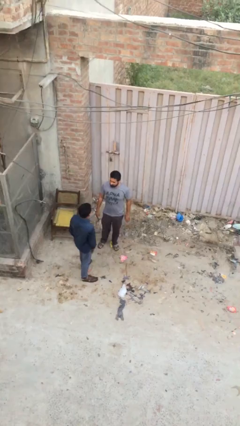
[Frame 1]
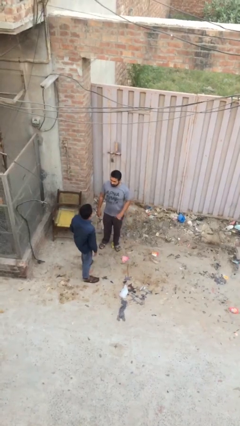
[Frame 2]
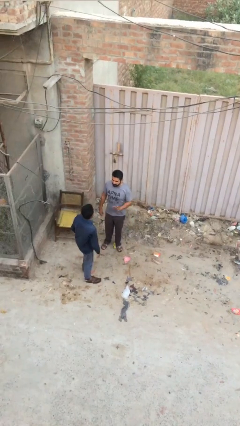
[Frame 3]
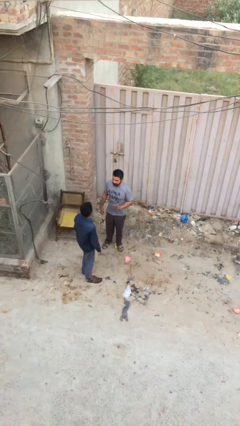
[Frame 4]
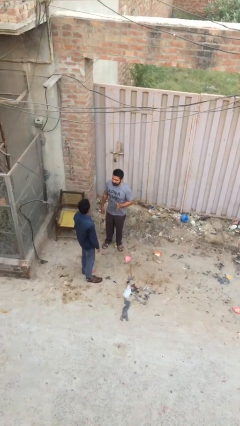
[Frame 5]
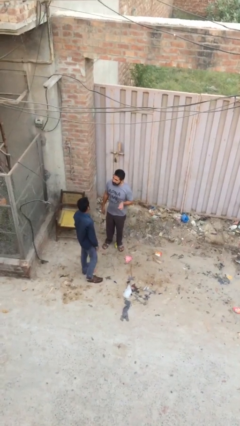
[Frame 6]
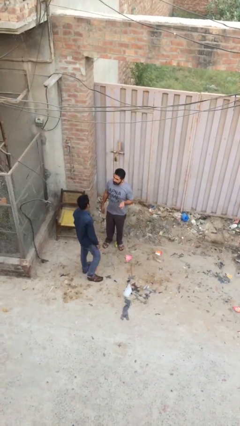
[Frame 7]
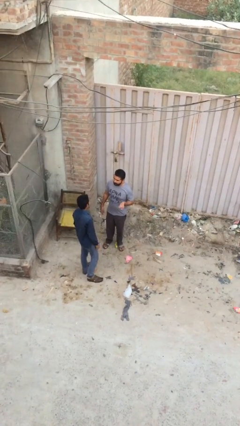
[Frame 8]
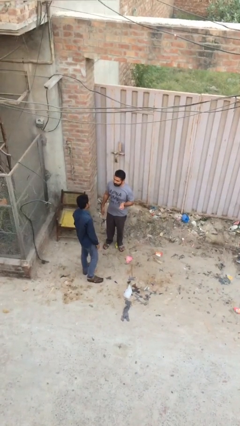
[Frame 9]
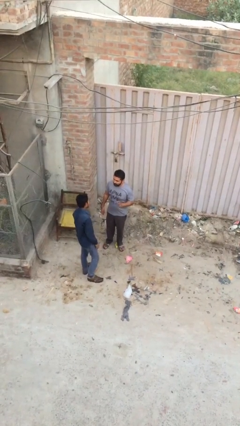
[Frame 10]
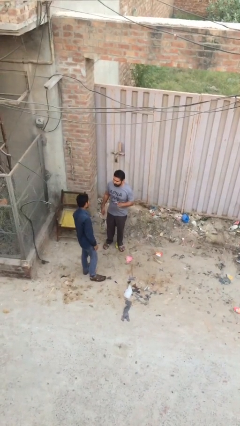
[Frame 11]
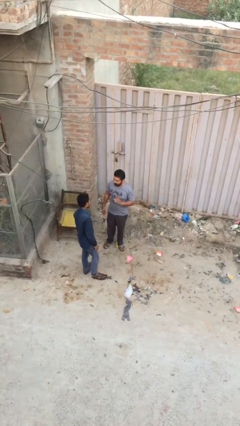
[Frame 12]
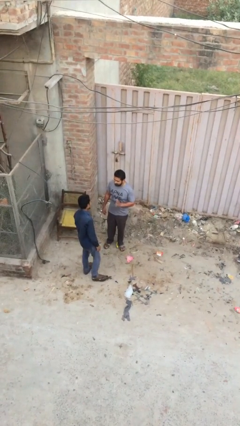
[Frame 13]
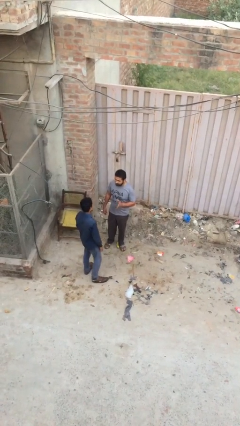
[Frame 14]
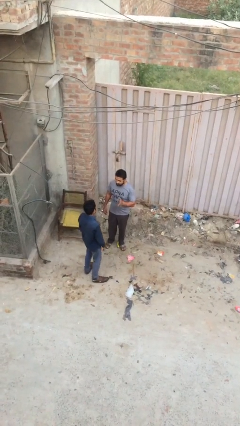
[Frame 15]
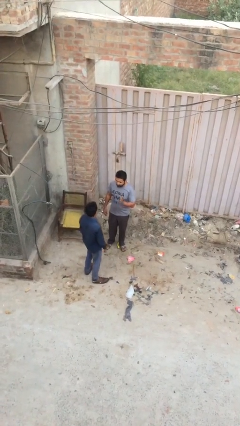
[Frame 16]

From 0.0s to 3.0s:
person talks to person

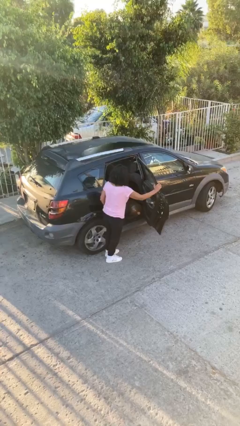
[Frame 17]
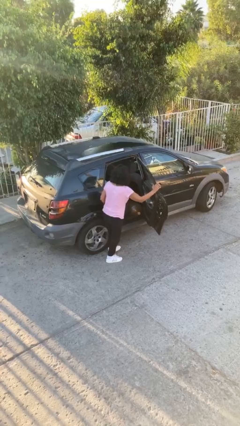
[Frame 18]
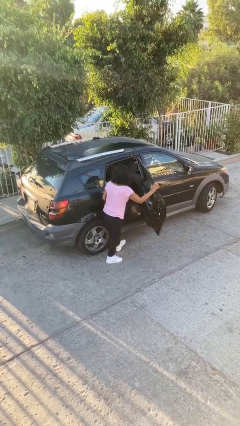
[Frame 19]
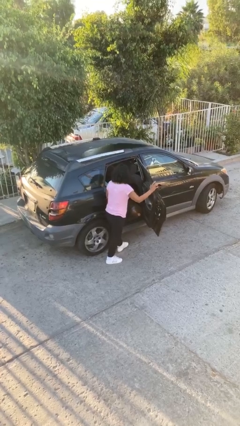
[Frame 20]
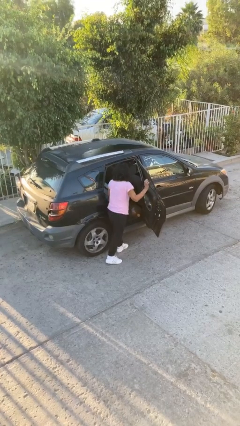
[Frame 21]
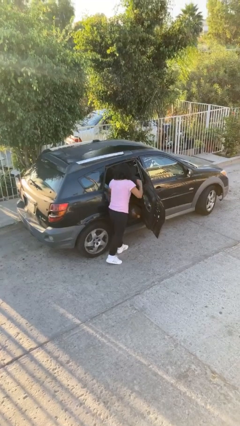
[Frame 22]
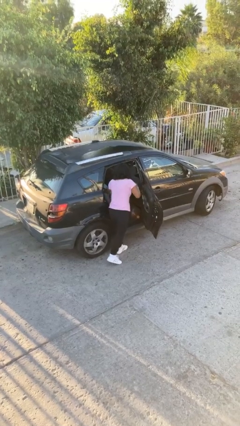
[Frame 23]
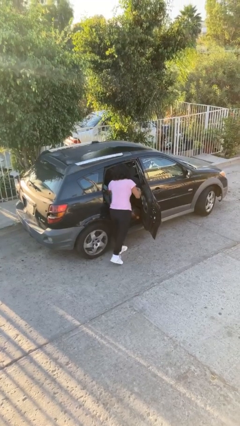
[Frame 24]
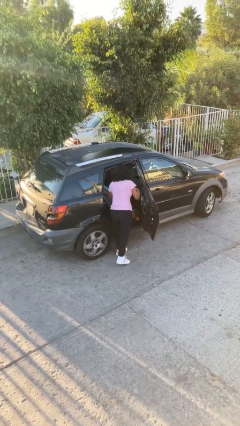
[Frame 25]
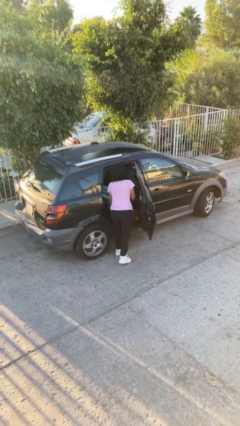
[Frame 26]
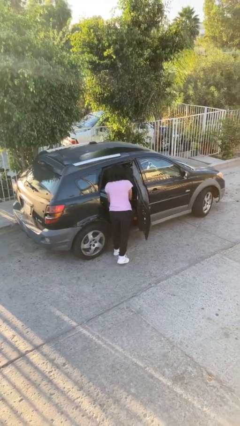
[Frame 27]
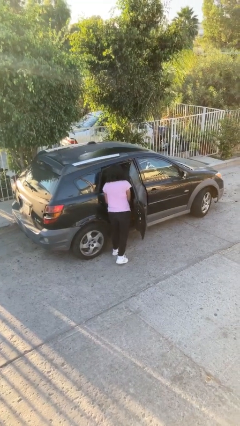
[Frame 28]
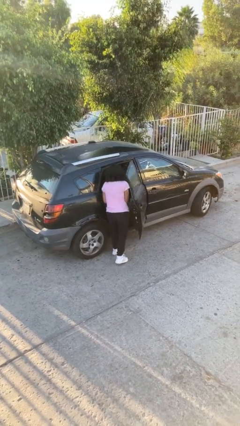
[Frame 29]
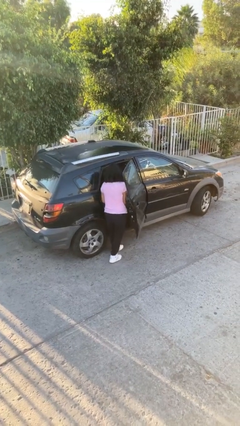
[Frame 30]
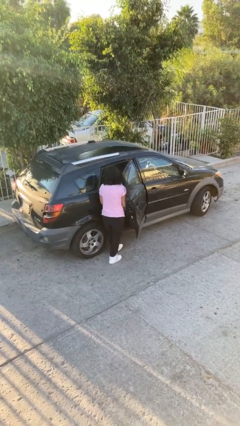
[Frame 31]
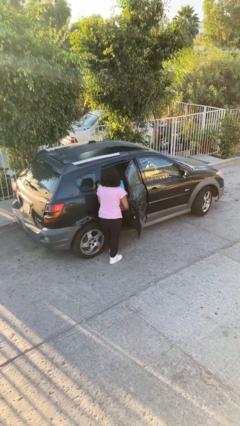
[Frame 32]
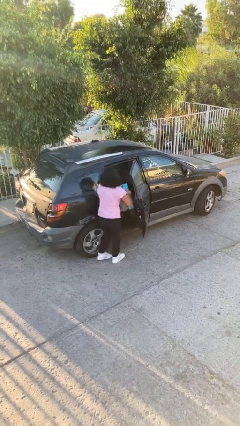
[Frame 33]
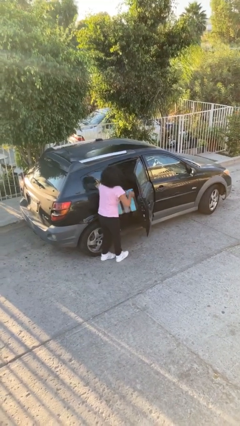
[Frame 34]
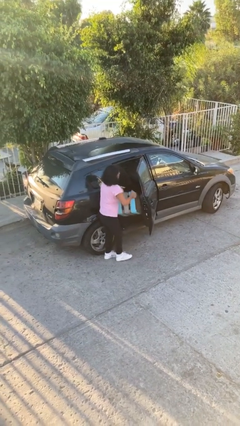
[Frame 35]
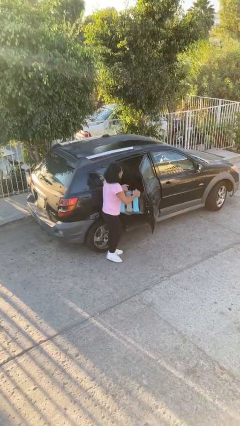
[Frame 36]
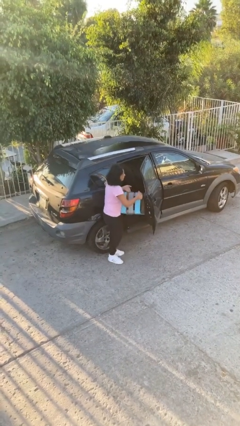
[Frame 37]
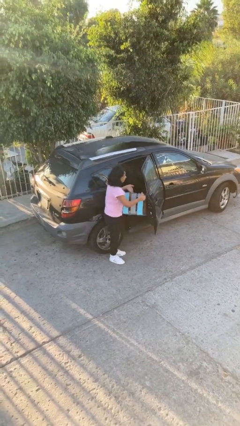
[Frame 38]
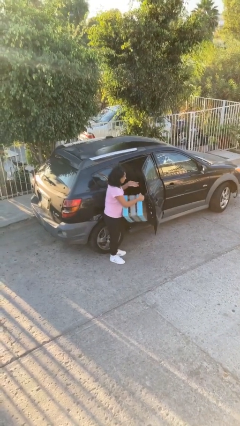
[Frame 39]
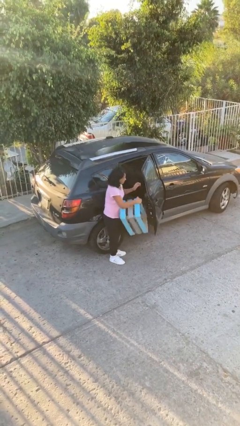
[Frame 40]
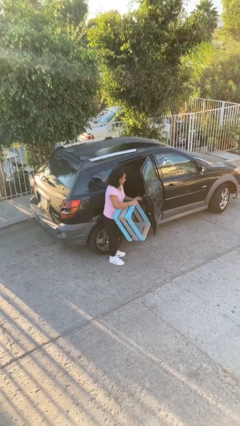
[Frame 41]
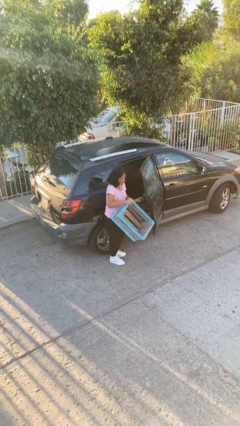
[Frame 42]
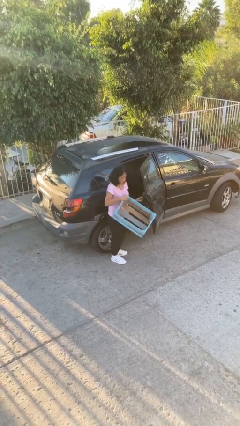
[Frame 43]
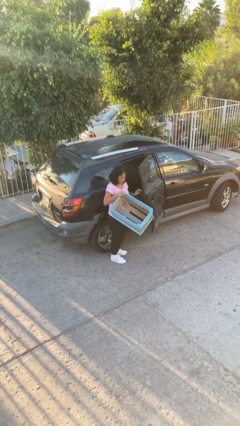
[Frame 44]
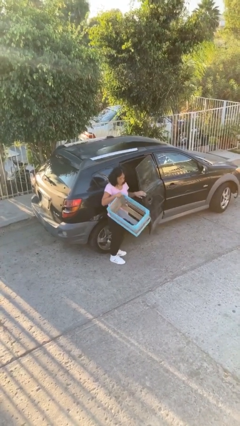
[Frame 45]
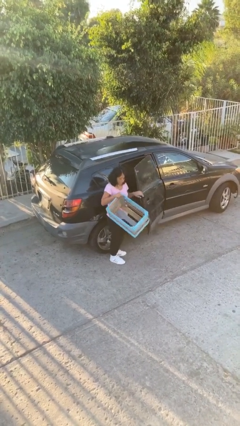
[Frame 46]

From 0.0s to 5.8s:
person unloads car

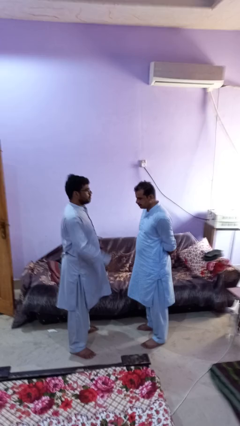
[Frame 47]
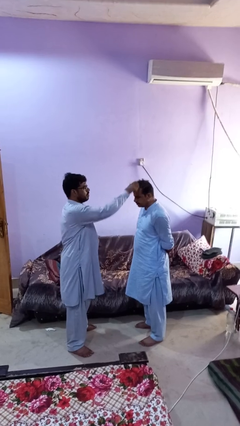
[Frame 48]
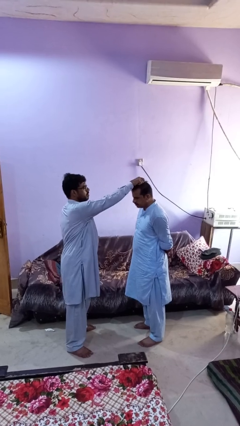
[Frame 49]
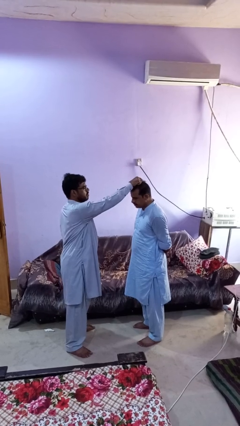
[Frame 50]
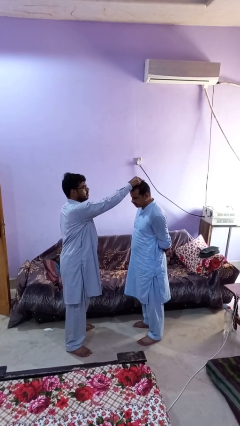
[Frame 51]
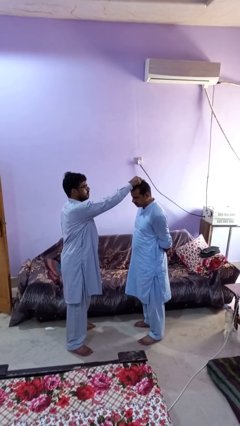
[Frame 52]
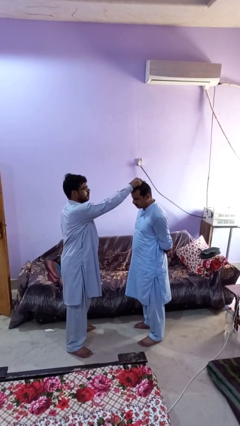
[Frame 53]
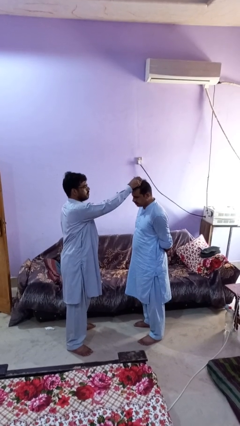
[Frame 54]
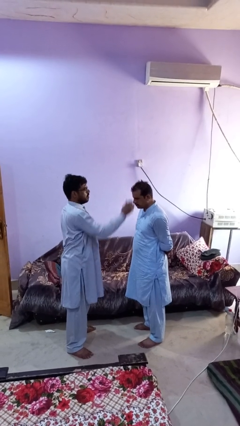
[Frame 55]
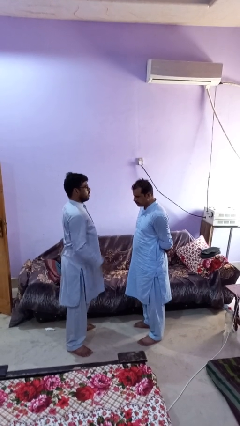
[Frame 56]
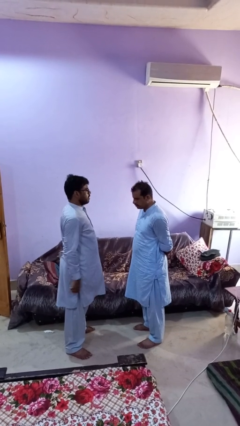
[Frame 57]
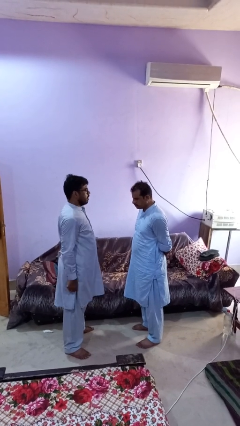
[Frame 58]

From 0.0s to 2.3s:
person grabs person by hair

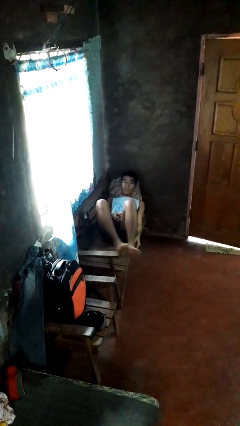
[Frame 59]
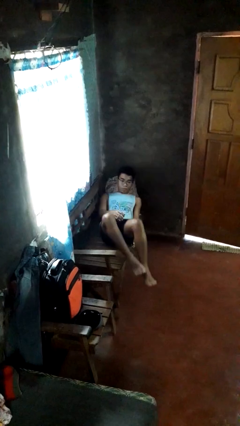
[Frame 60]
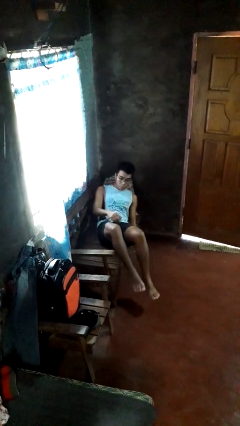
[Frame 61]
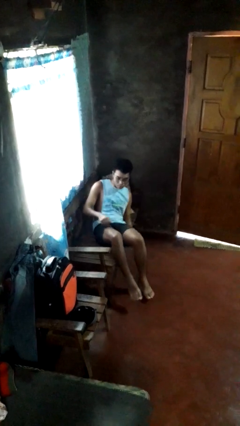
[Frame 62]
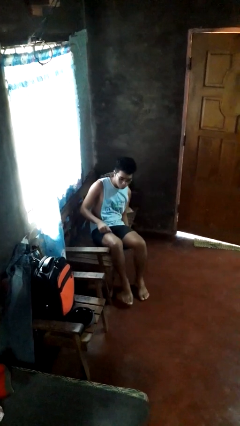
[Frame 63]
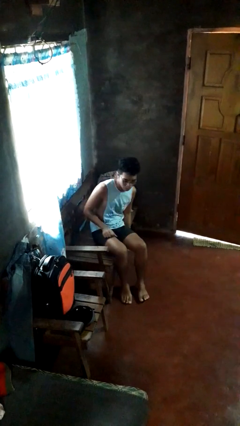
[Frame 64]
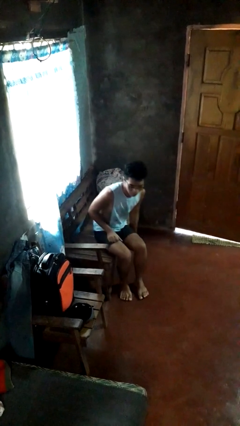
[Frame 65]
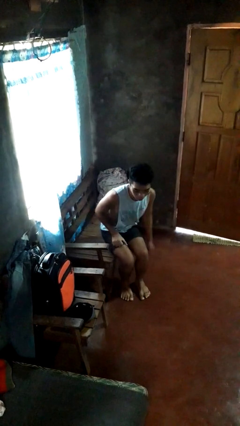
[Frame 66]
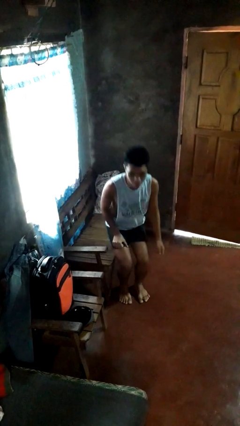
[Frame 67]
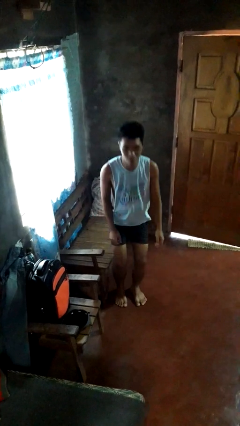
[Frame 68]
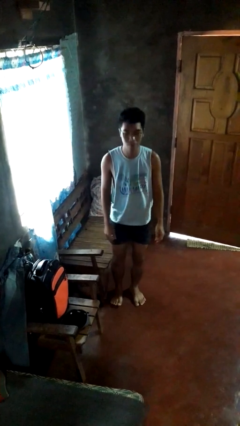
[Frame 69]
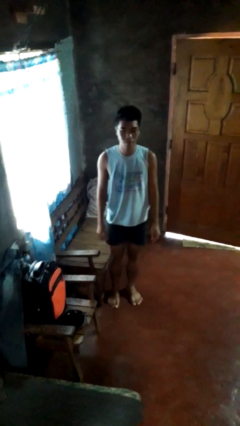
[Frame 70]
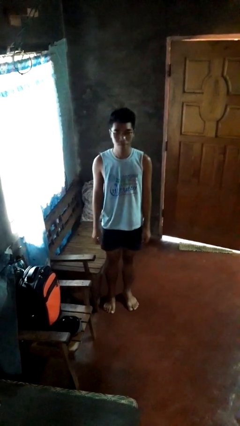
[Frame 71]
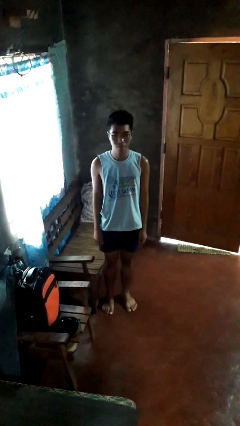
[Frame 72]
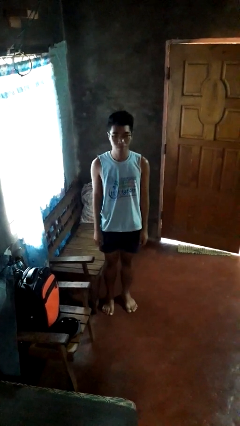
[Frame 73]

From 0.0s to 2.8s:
person stands up

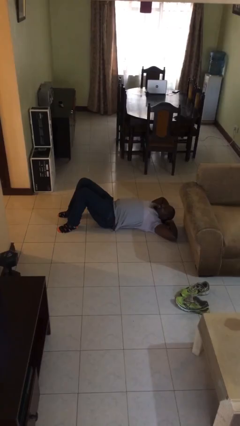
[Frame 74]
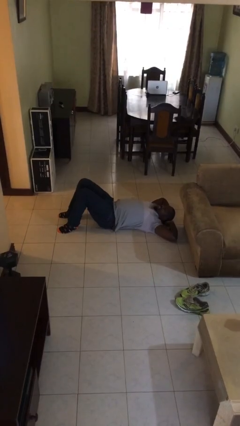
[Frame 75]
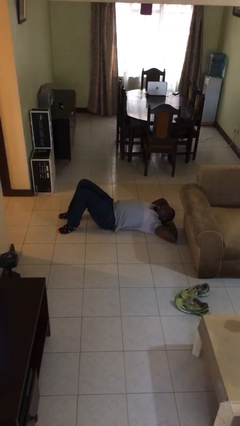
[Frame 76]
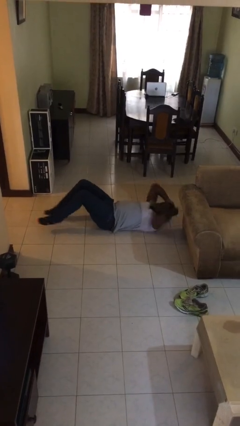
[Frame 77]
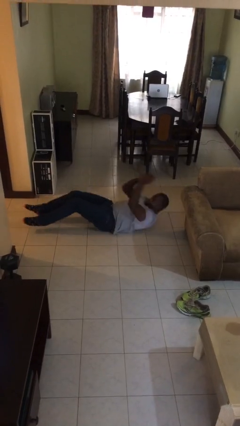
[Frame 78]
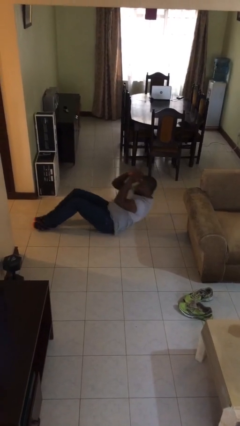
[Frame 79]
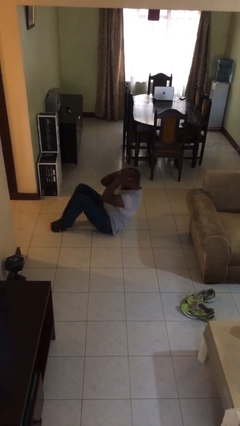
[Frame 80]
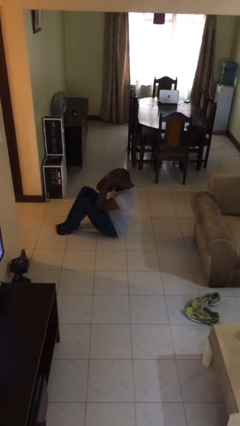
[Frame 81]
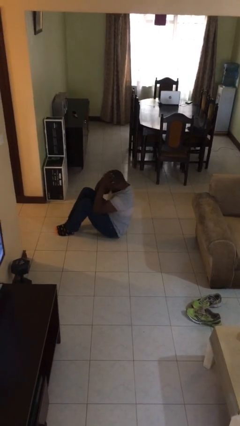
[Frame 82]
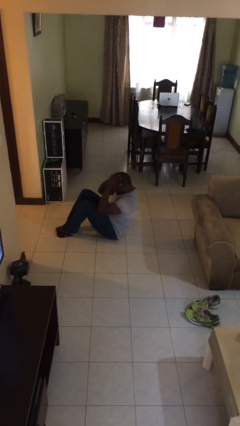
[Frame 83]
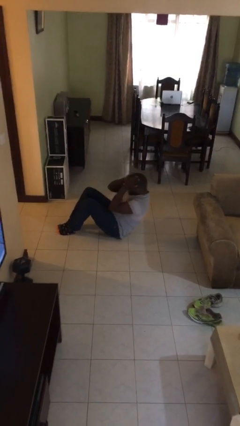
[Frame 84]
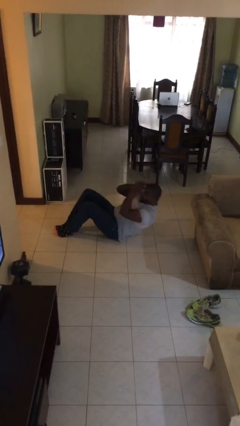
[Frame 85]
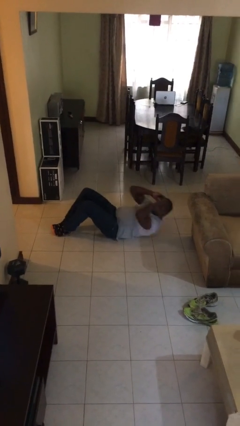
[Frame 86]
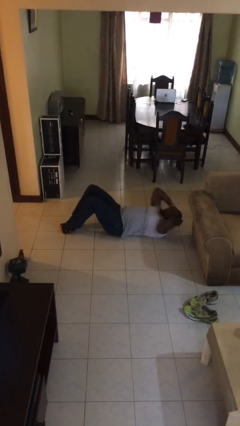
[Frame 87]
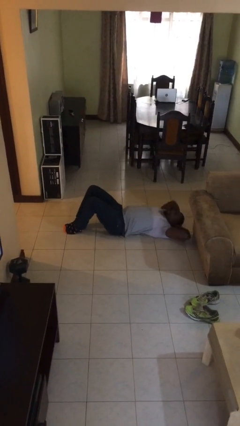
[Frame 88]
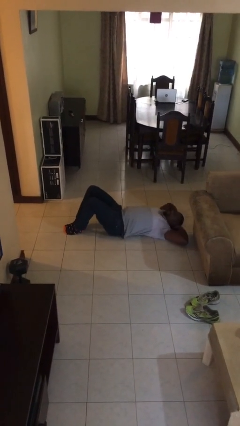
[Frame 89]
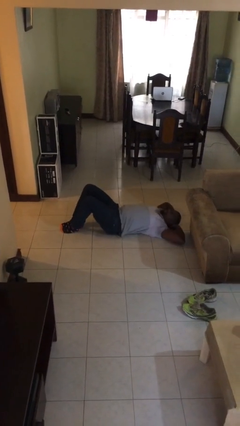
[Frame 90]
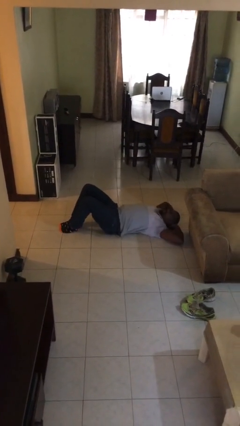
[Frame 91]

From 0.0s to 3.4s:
person exercises with situp

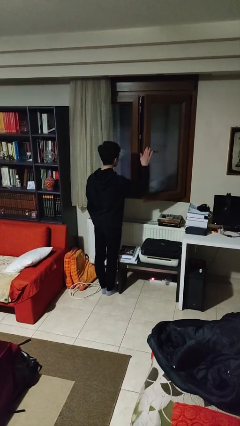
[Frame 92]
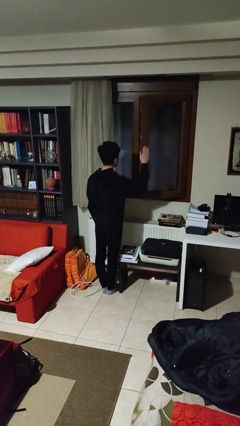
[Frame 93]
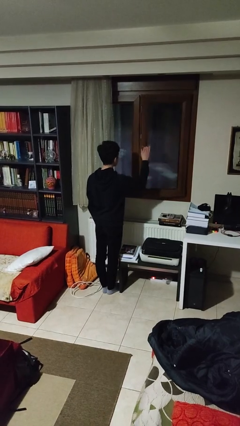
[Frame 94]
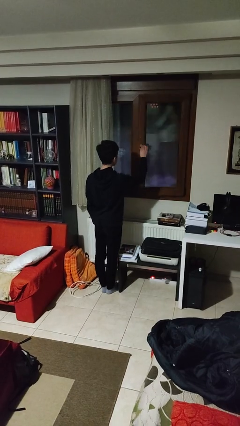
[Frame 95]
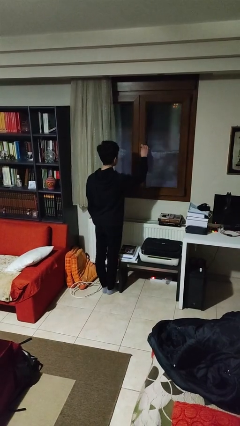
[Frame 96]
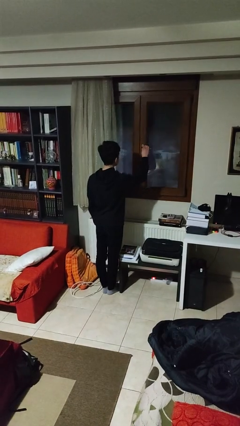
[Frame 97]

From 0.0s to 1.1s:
person closes home window
